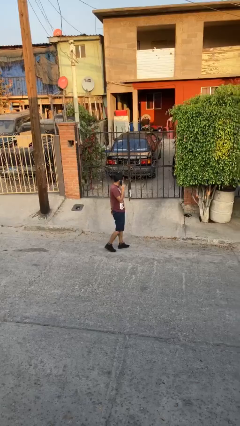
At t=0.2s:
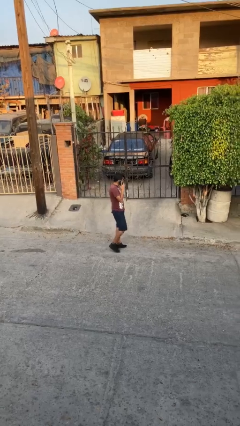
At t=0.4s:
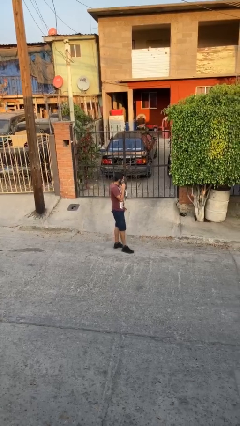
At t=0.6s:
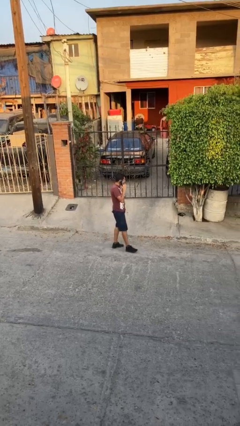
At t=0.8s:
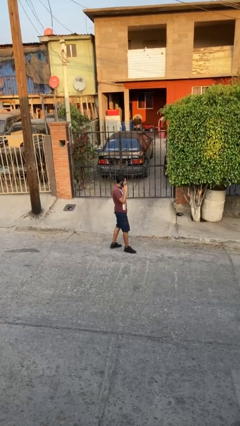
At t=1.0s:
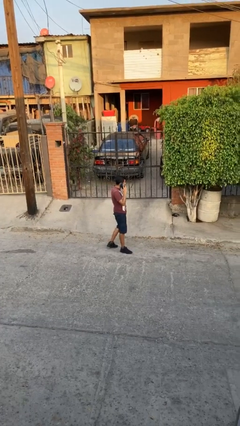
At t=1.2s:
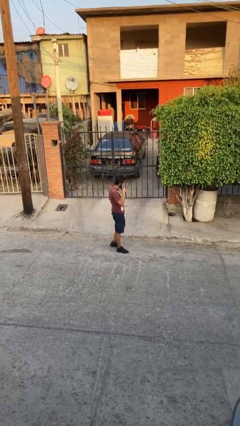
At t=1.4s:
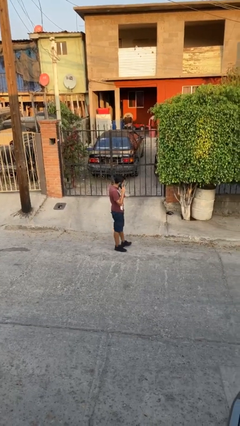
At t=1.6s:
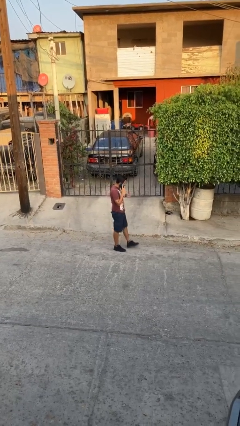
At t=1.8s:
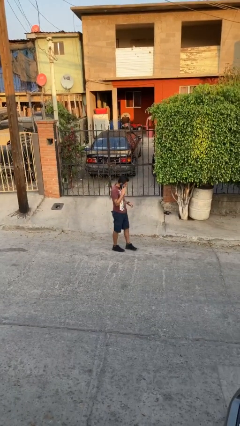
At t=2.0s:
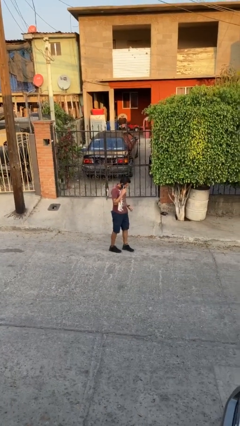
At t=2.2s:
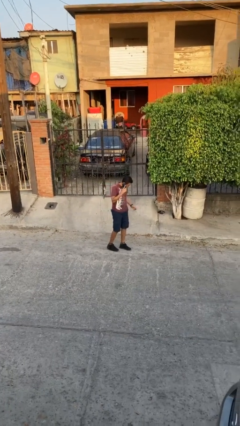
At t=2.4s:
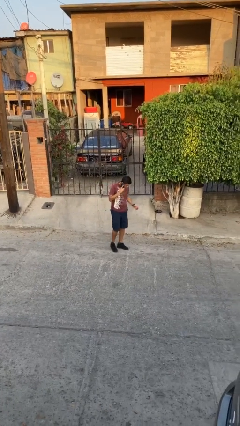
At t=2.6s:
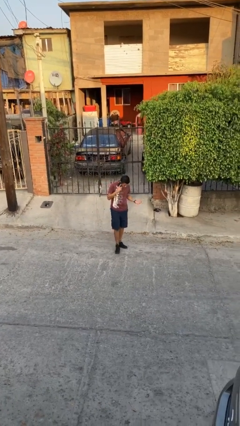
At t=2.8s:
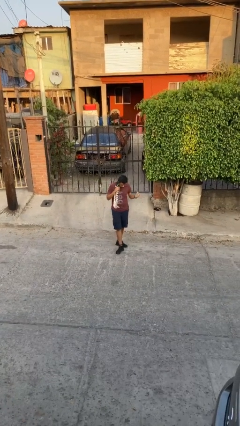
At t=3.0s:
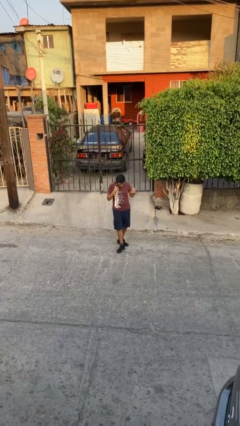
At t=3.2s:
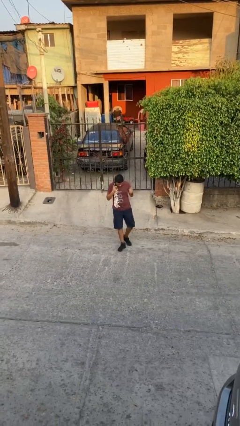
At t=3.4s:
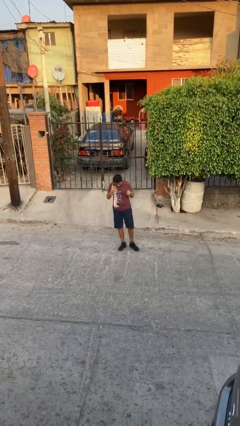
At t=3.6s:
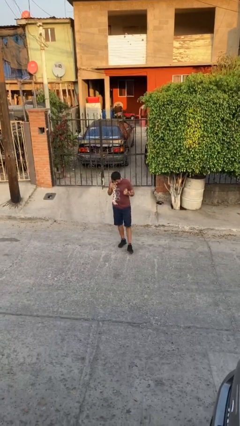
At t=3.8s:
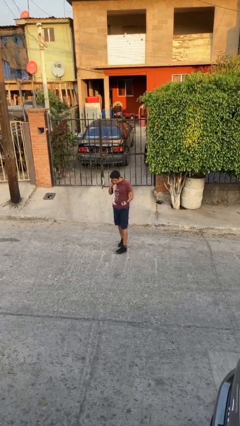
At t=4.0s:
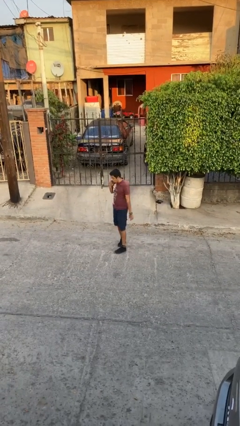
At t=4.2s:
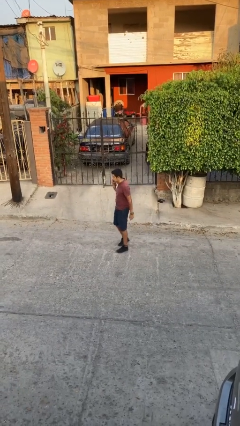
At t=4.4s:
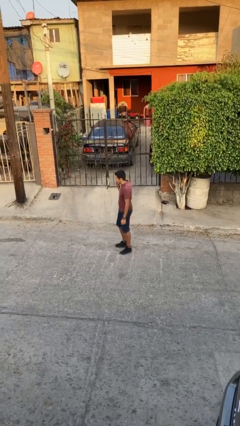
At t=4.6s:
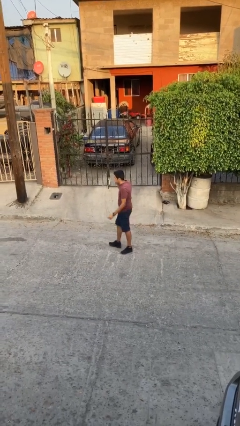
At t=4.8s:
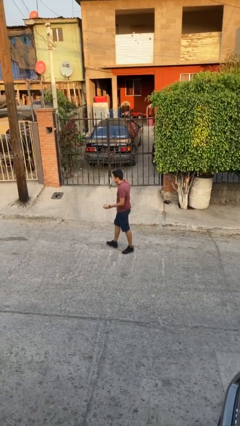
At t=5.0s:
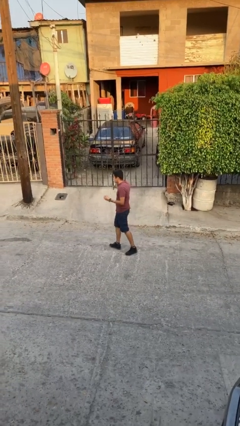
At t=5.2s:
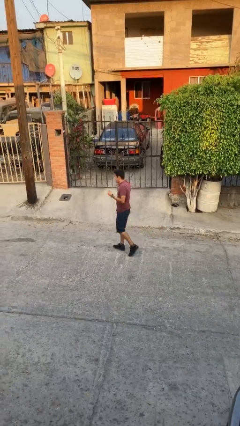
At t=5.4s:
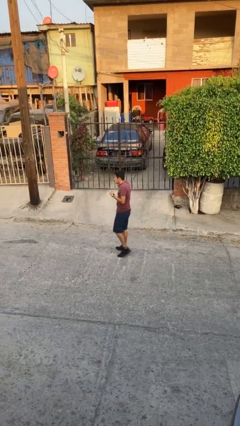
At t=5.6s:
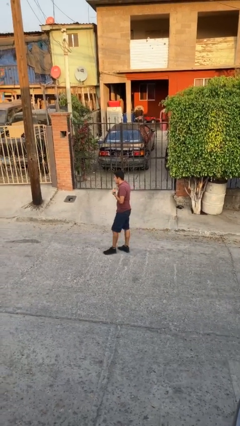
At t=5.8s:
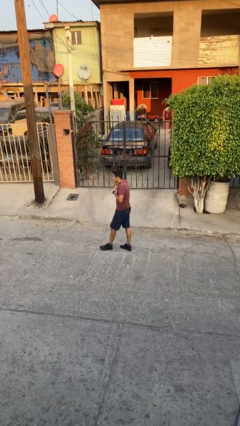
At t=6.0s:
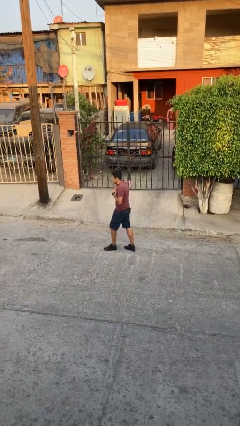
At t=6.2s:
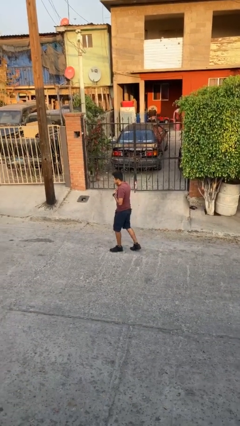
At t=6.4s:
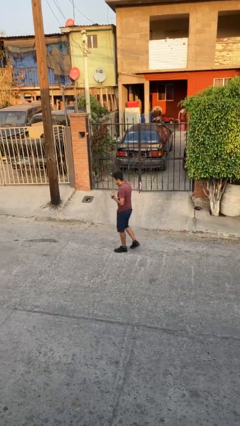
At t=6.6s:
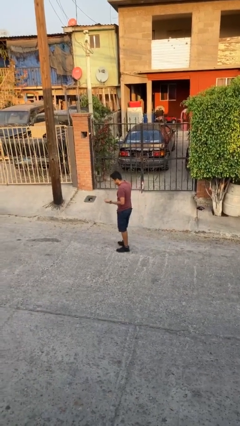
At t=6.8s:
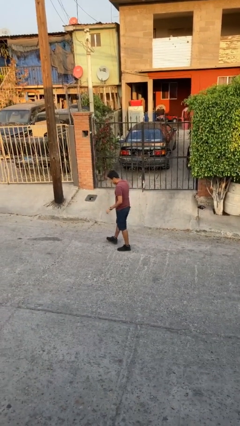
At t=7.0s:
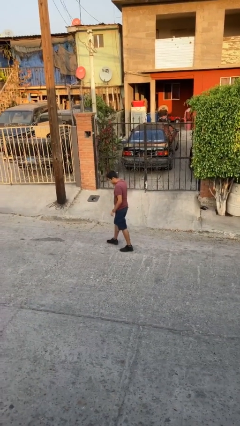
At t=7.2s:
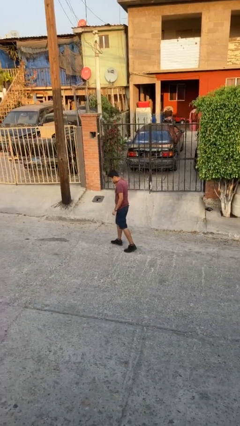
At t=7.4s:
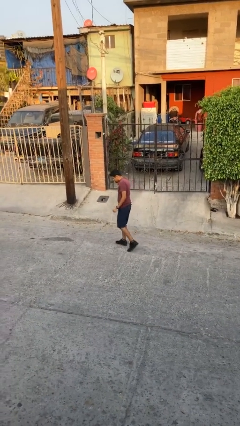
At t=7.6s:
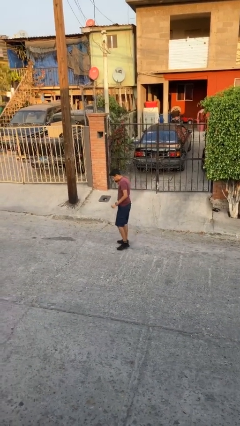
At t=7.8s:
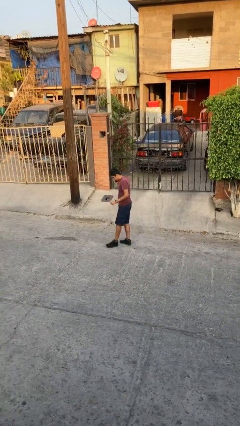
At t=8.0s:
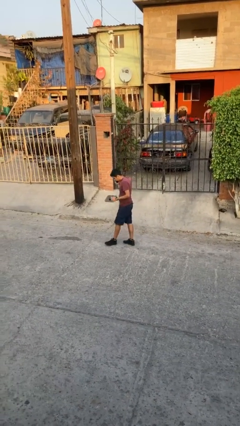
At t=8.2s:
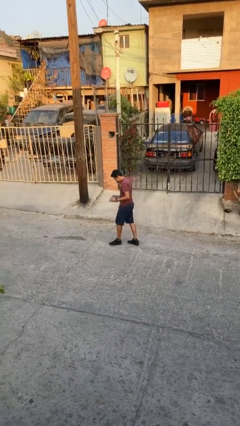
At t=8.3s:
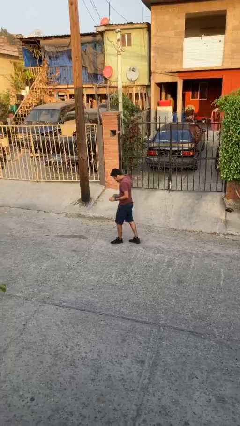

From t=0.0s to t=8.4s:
person talks on phone

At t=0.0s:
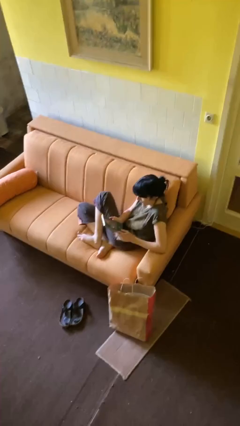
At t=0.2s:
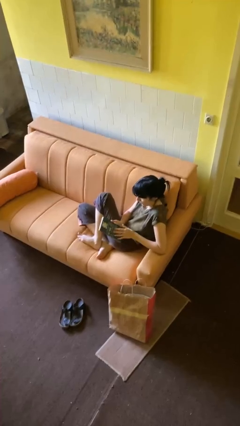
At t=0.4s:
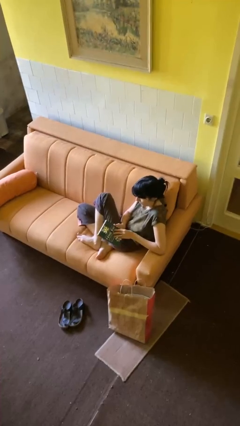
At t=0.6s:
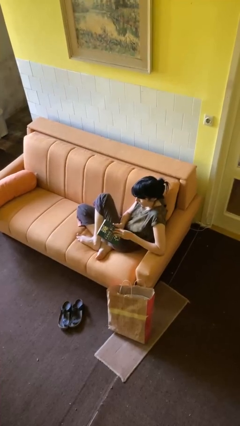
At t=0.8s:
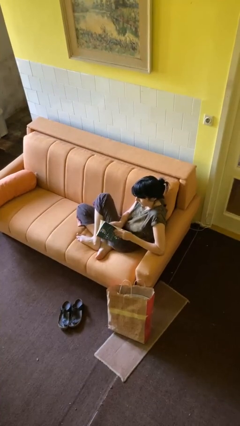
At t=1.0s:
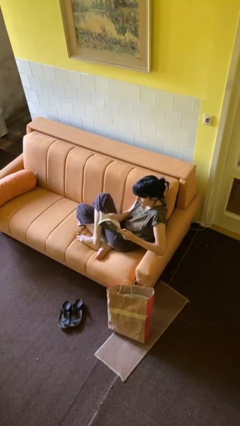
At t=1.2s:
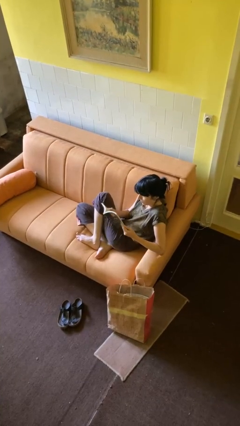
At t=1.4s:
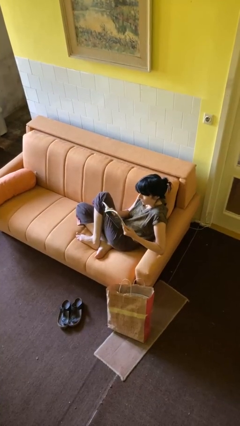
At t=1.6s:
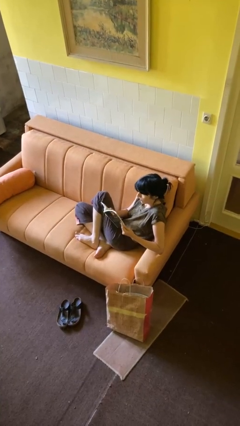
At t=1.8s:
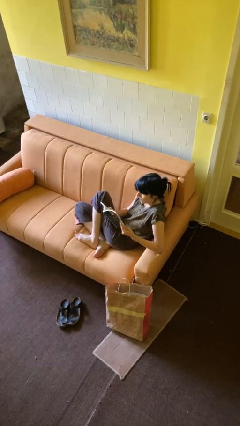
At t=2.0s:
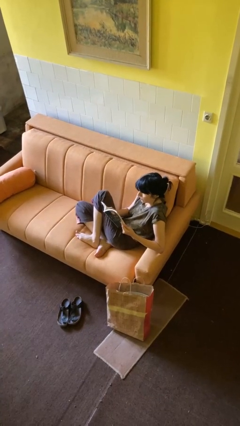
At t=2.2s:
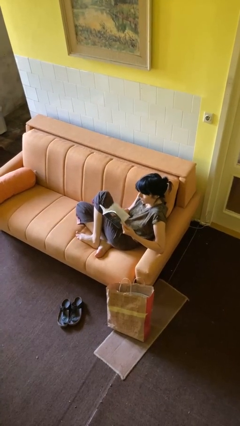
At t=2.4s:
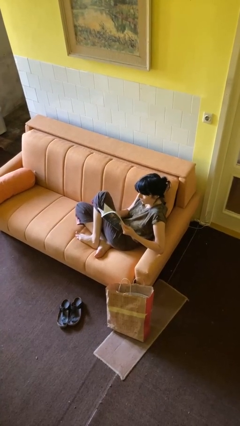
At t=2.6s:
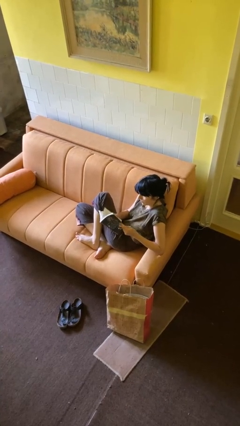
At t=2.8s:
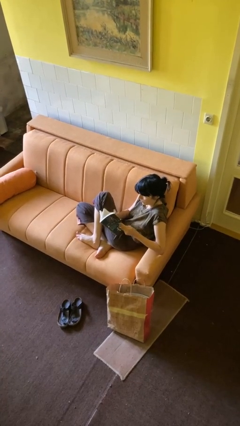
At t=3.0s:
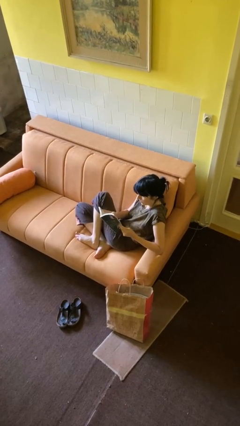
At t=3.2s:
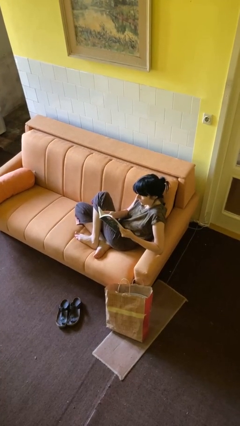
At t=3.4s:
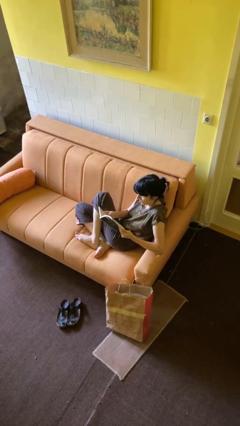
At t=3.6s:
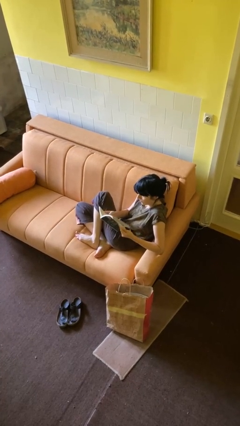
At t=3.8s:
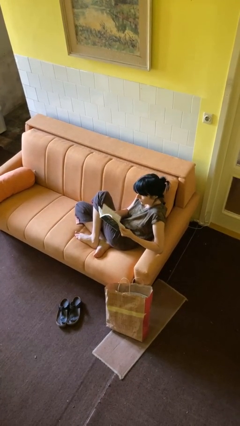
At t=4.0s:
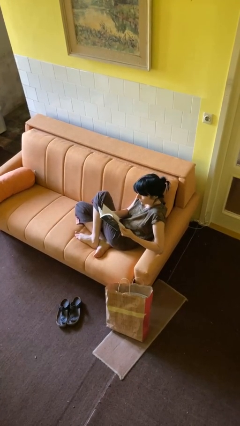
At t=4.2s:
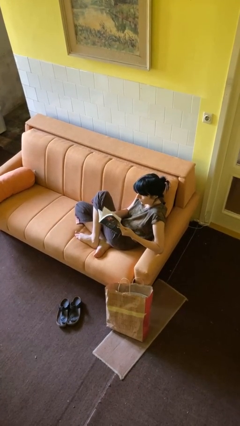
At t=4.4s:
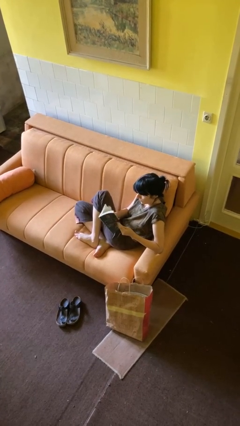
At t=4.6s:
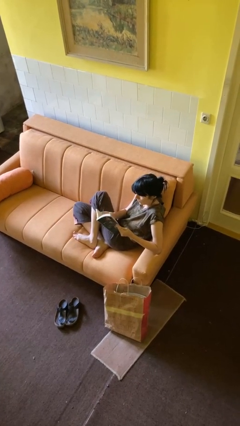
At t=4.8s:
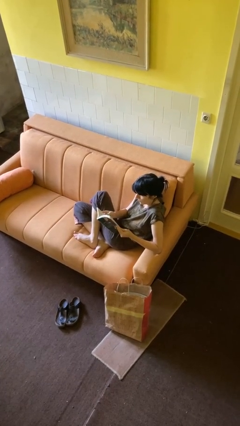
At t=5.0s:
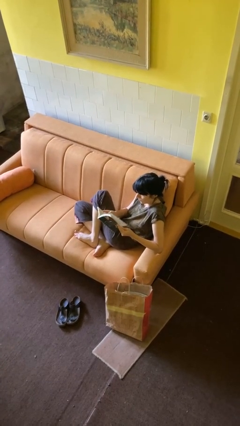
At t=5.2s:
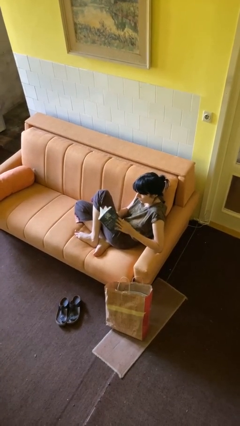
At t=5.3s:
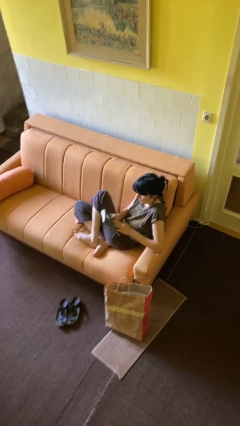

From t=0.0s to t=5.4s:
person reads book

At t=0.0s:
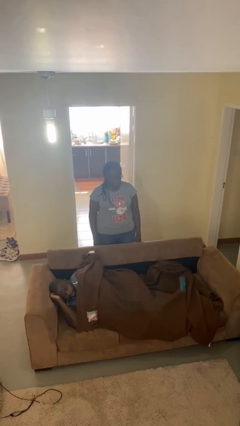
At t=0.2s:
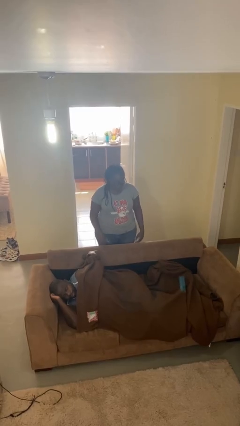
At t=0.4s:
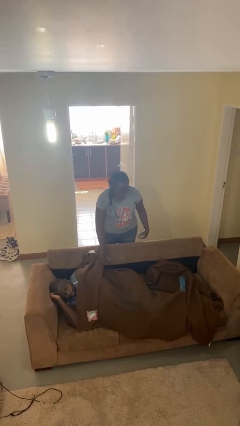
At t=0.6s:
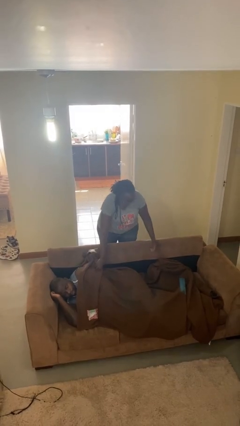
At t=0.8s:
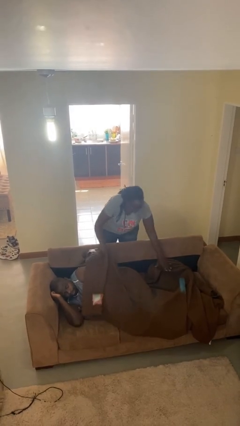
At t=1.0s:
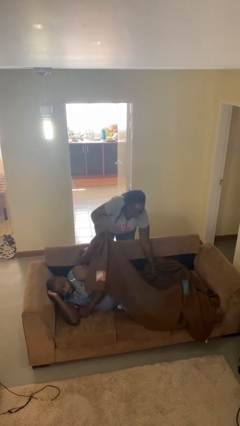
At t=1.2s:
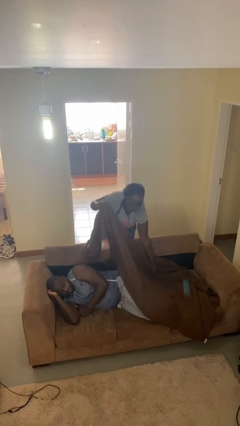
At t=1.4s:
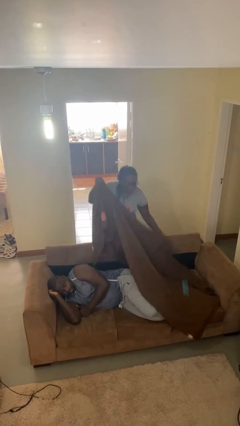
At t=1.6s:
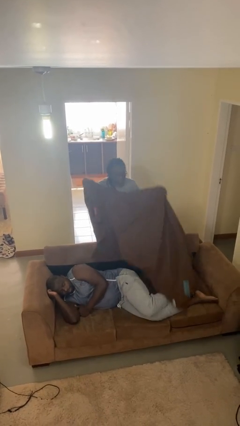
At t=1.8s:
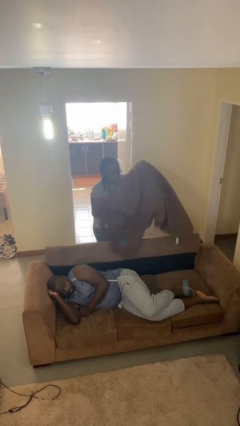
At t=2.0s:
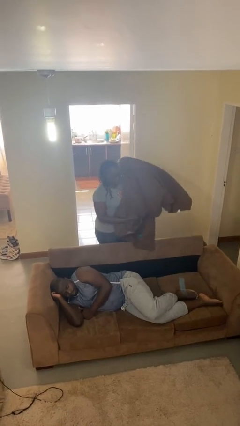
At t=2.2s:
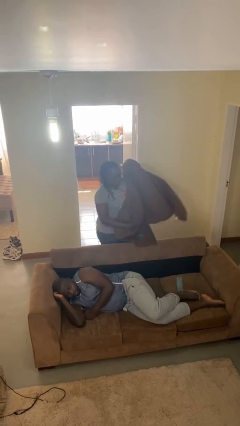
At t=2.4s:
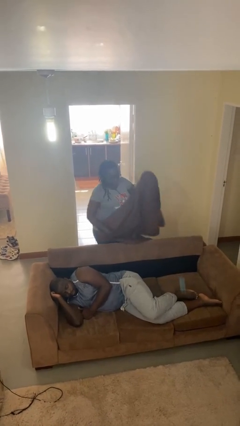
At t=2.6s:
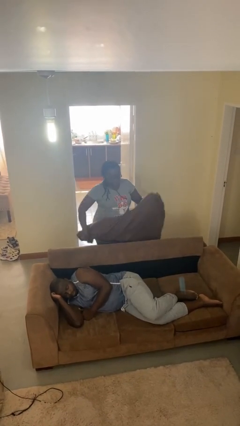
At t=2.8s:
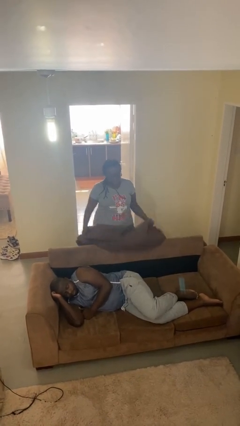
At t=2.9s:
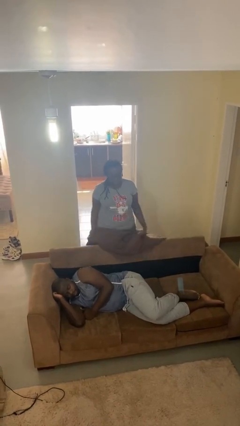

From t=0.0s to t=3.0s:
person uncovers friend with blanket

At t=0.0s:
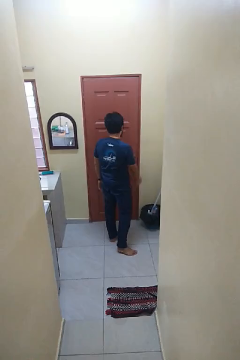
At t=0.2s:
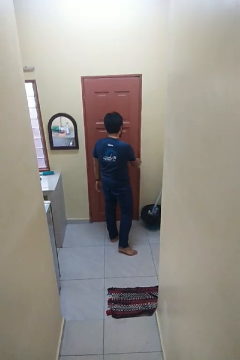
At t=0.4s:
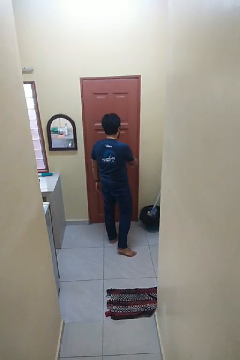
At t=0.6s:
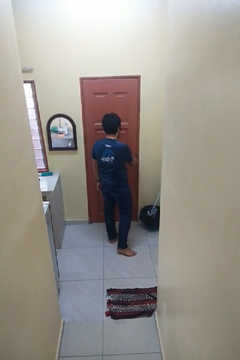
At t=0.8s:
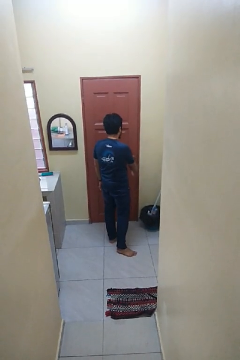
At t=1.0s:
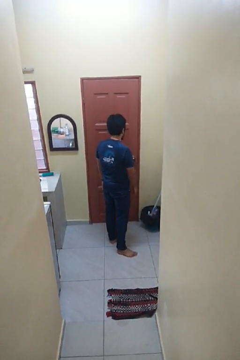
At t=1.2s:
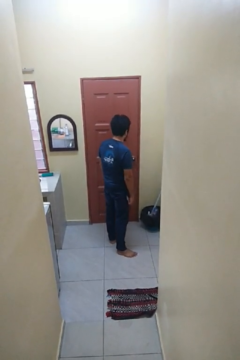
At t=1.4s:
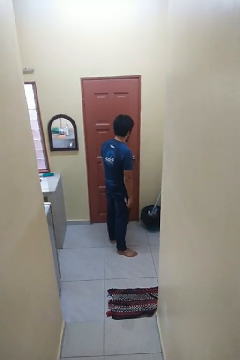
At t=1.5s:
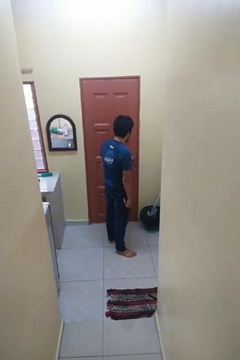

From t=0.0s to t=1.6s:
person unlocks door with keys
